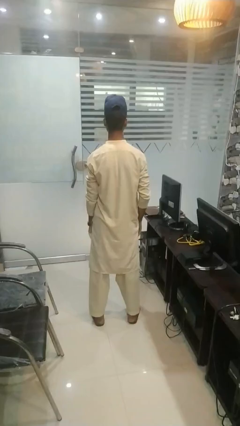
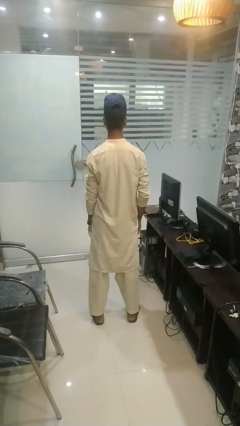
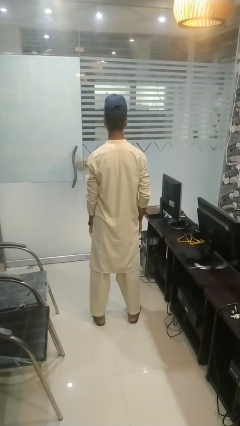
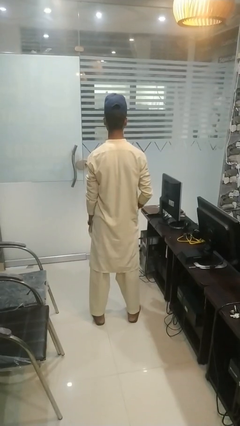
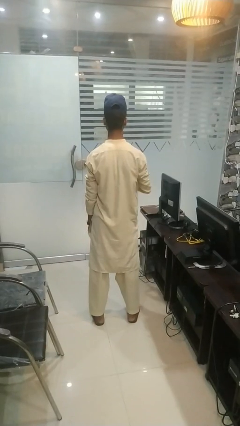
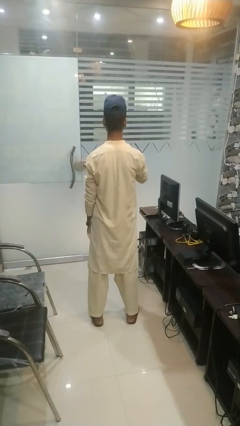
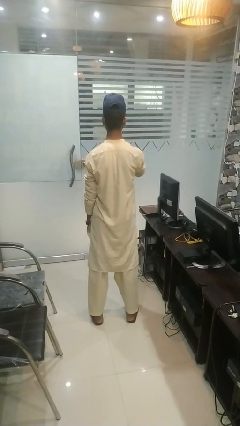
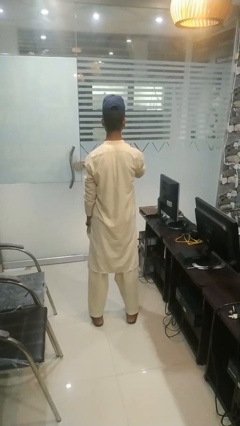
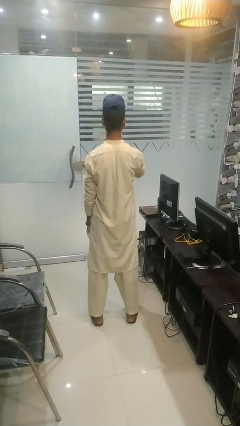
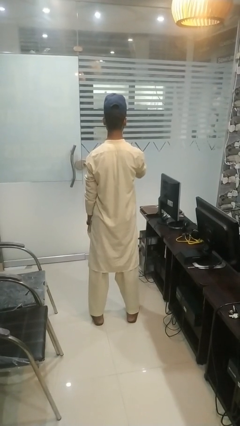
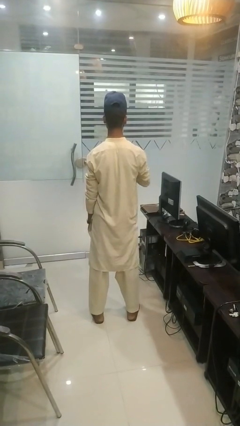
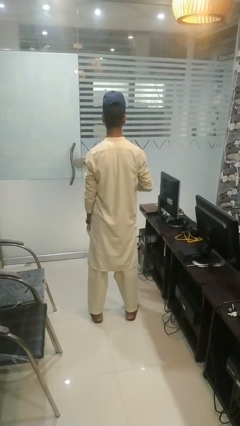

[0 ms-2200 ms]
person gestures be quiet

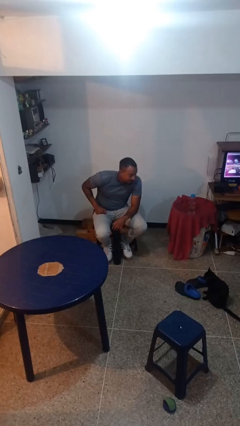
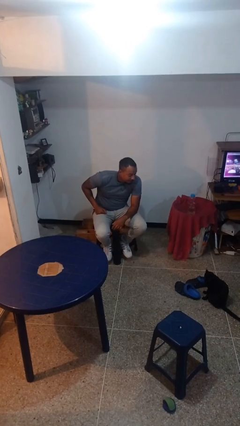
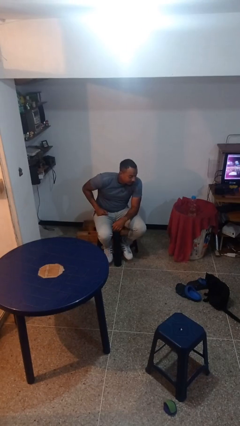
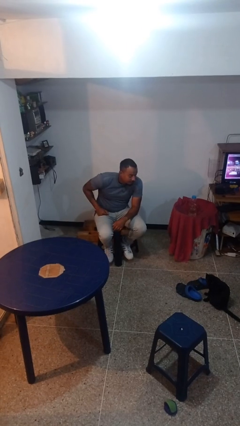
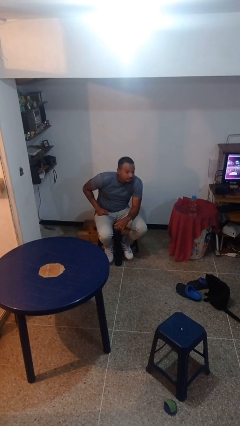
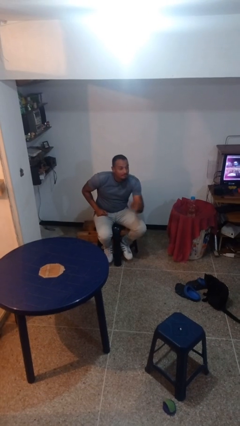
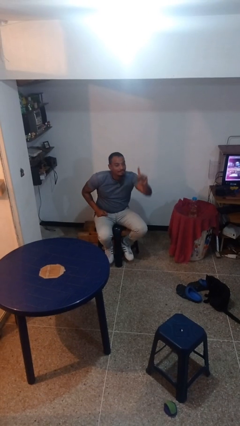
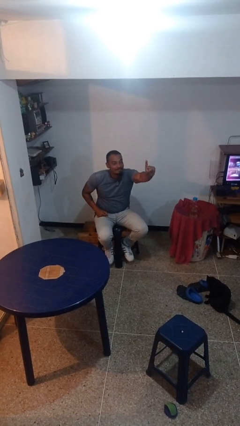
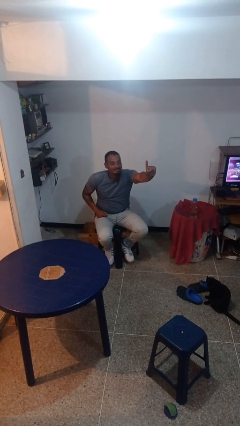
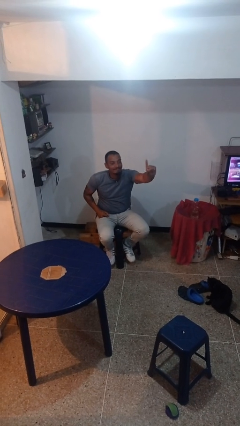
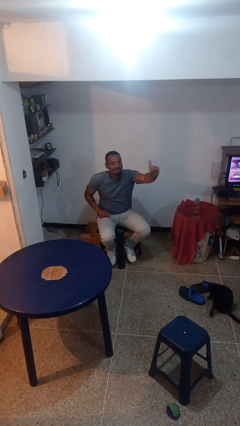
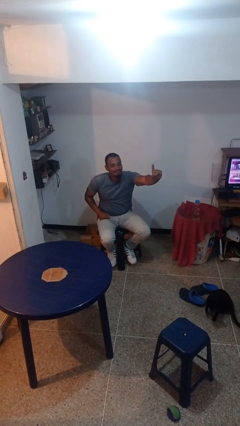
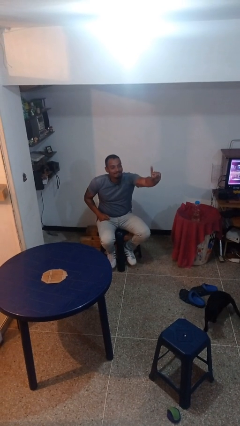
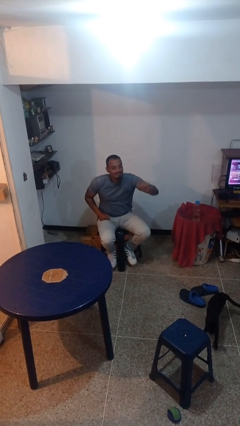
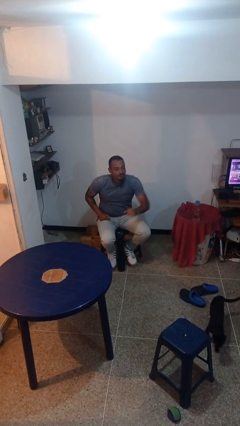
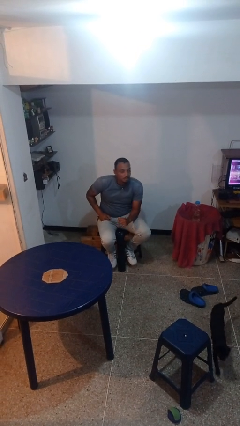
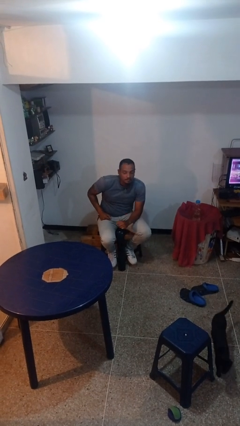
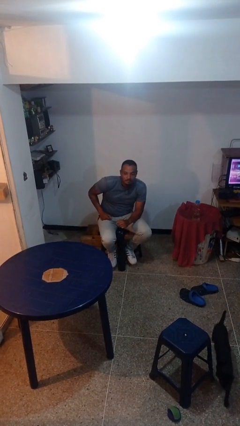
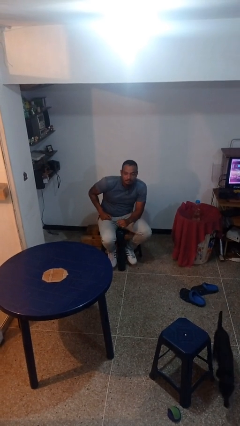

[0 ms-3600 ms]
person gestures number one

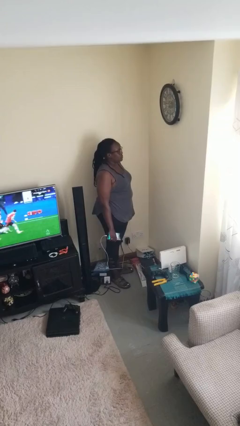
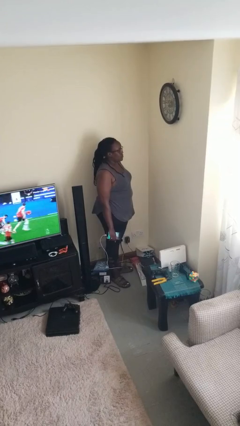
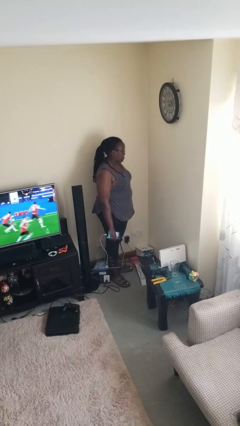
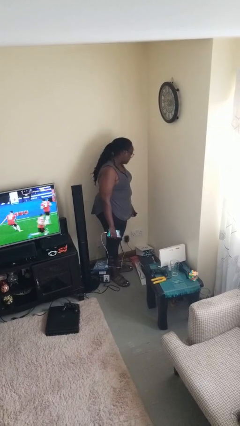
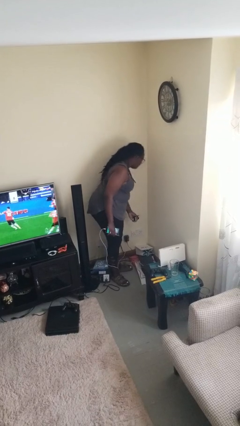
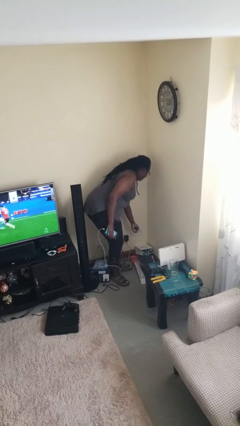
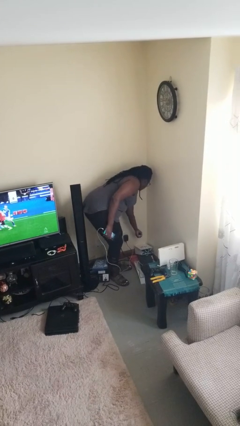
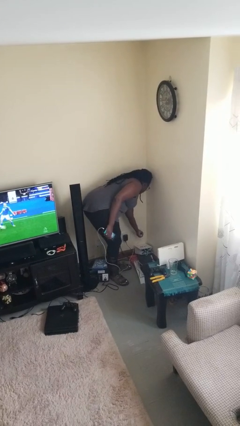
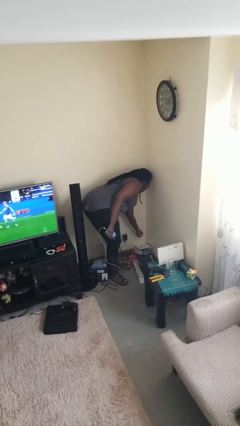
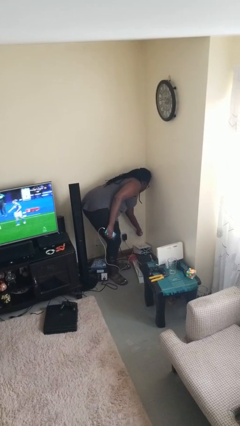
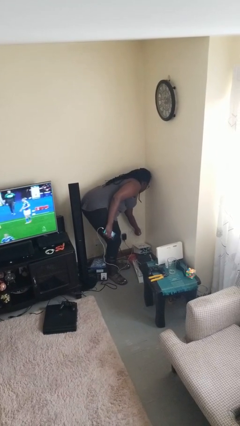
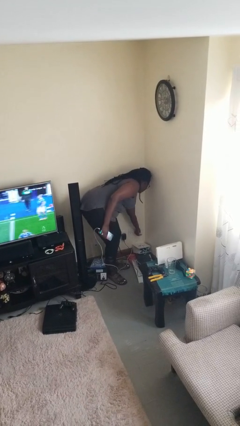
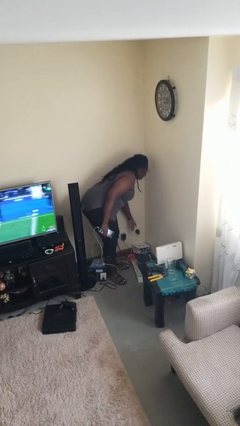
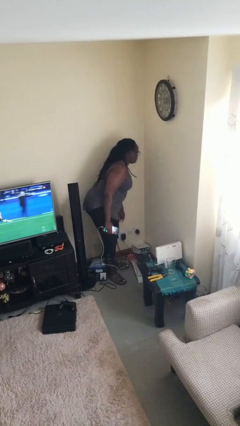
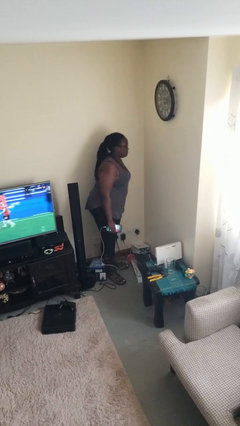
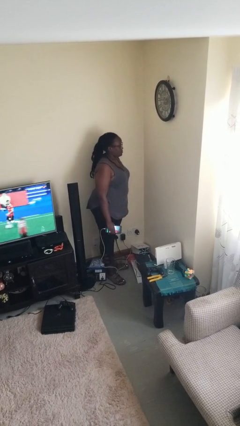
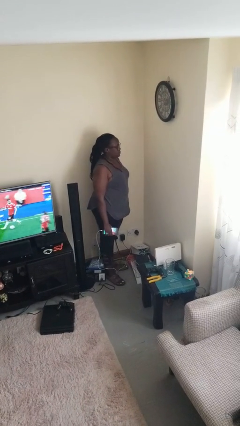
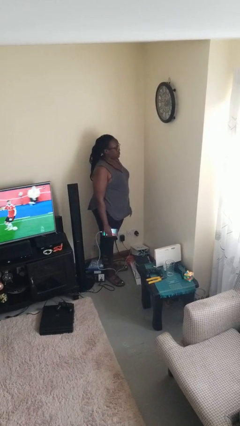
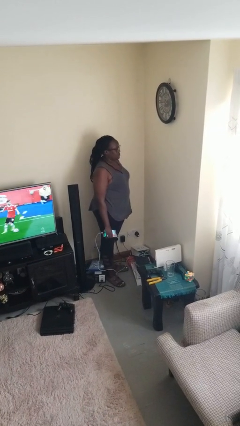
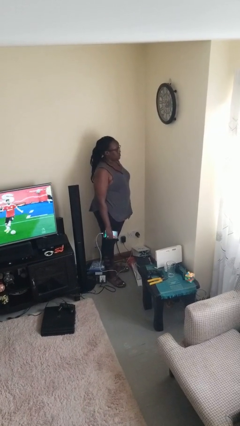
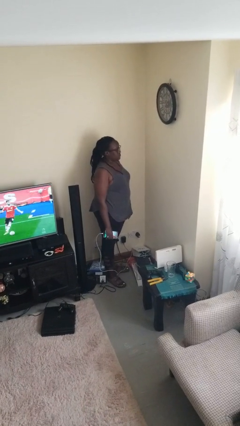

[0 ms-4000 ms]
person plugs into electrical socket

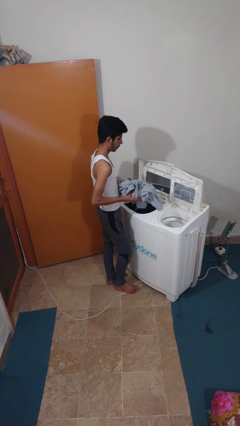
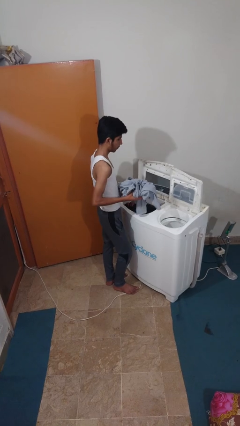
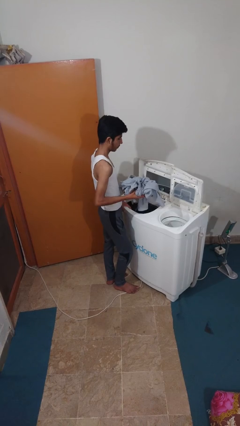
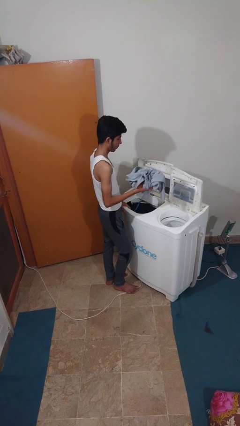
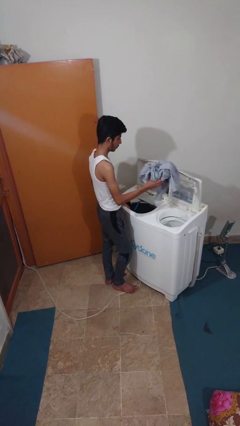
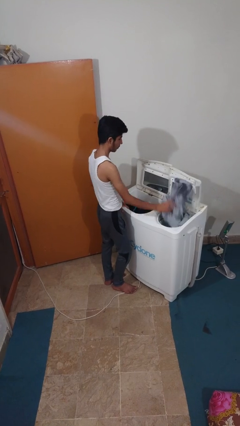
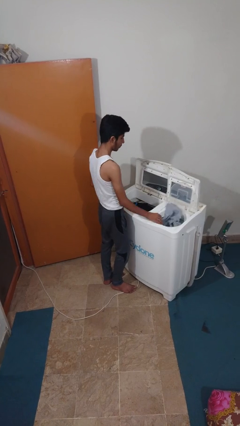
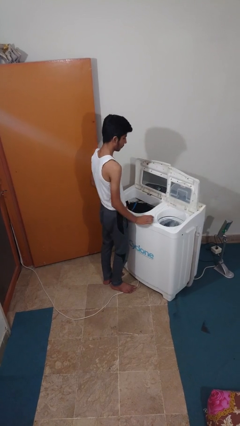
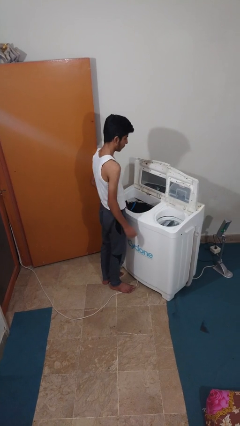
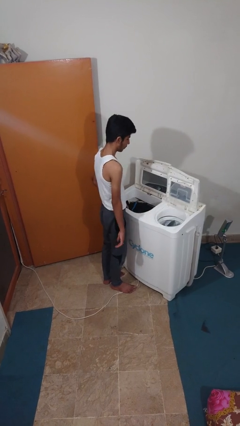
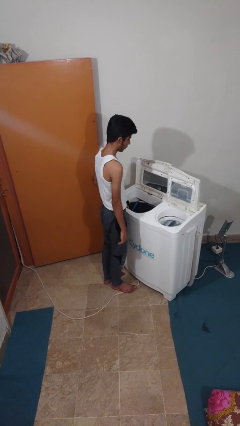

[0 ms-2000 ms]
person loads dryer

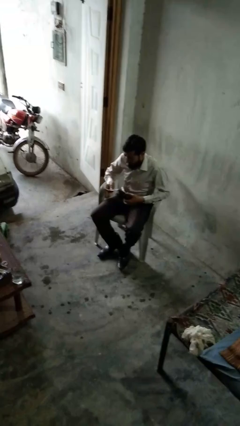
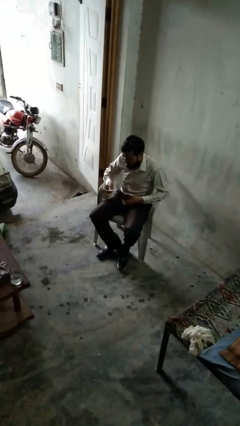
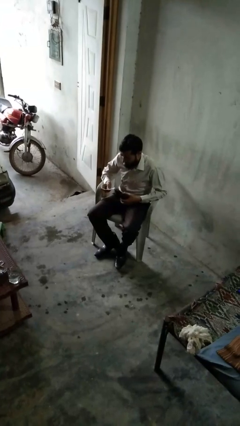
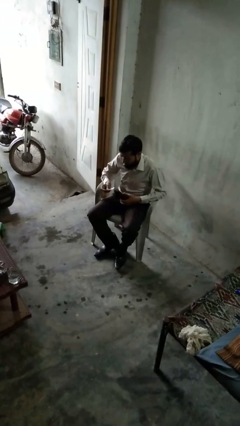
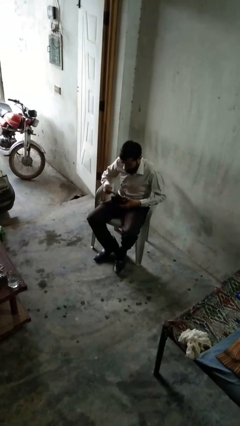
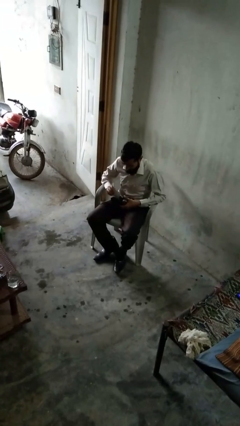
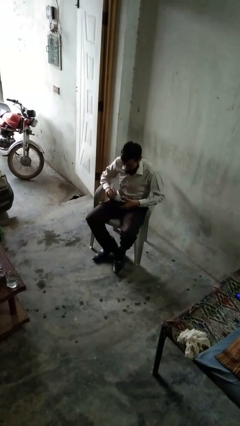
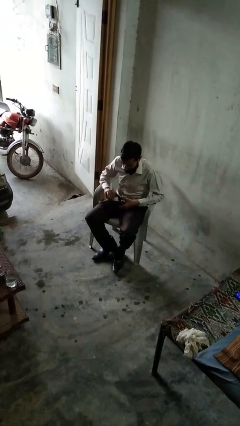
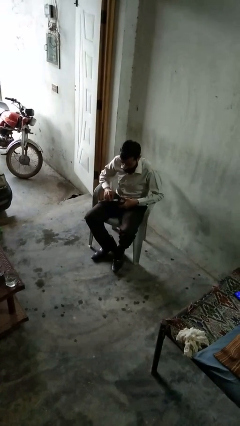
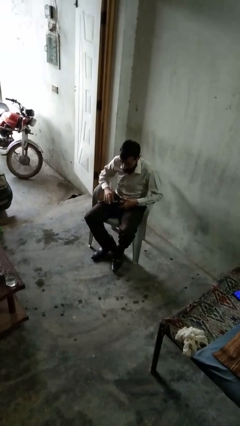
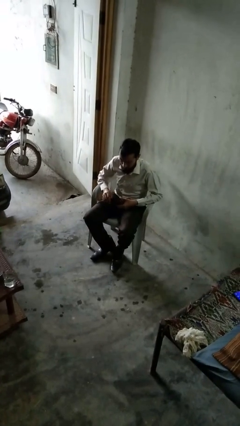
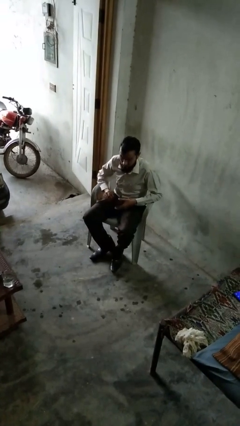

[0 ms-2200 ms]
person puts object into purse

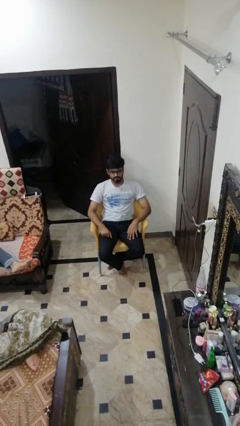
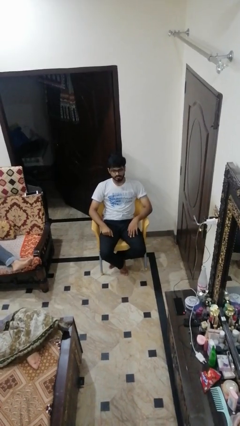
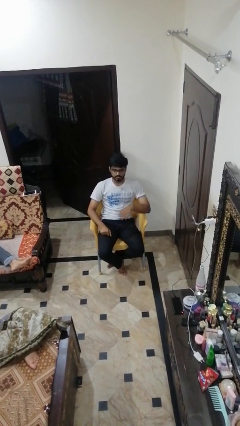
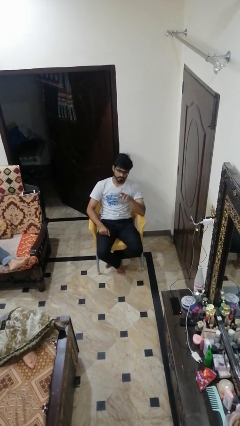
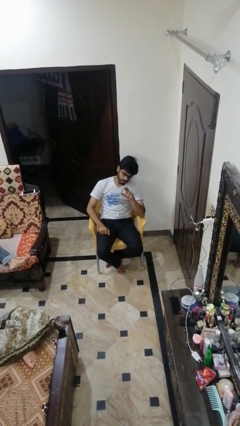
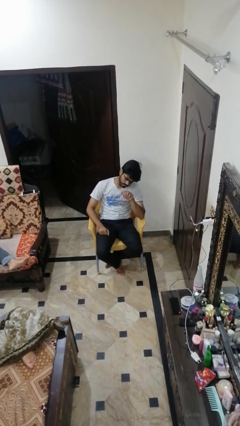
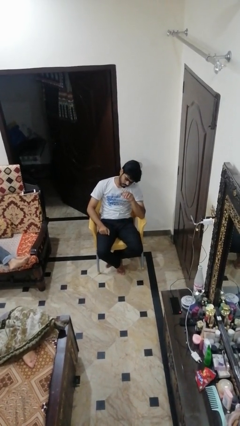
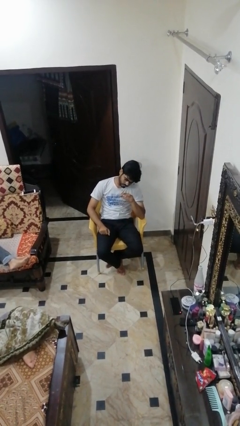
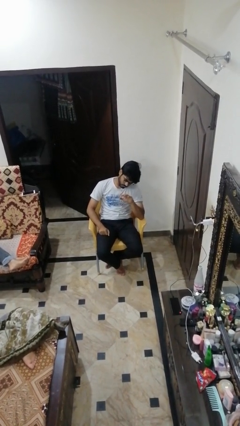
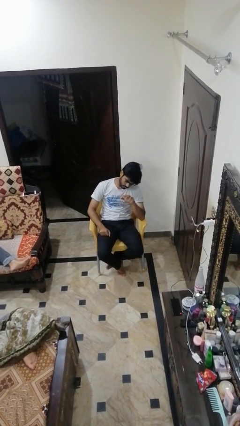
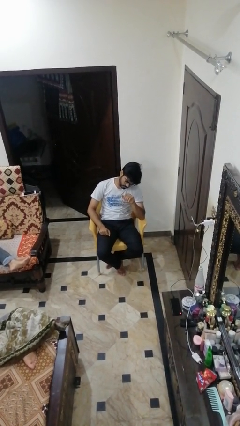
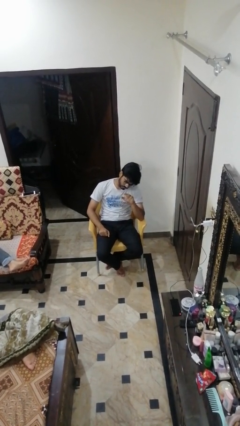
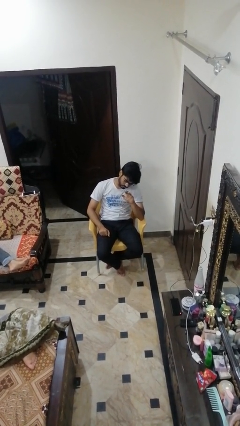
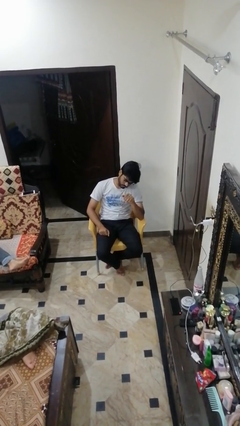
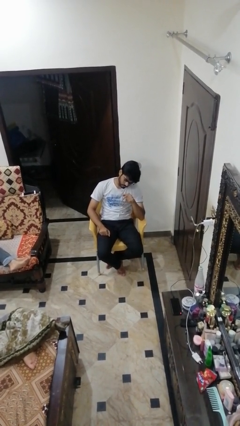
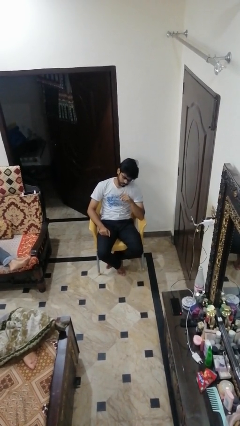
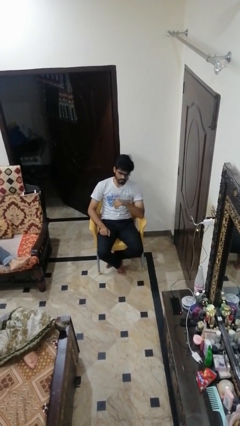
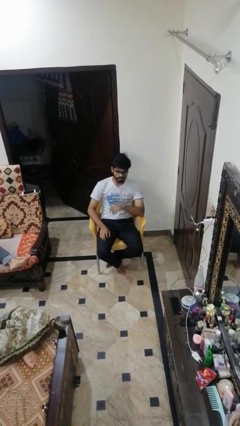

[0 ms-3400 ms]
person gestures come here

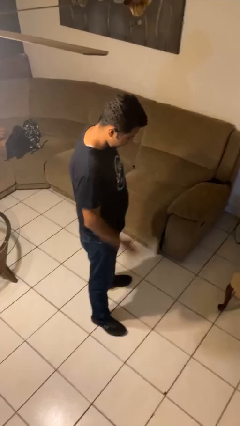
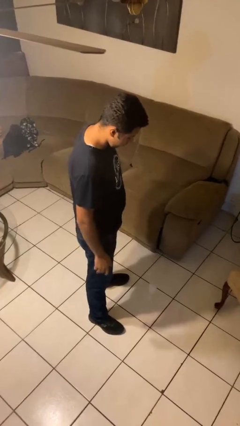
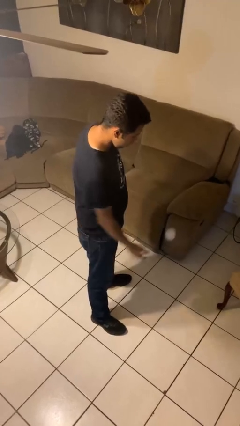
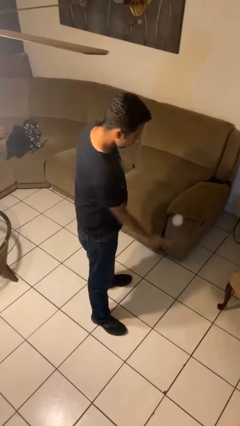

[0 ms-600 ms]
person bounces ball on floor
